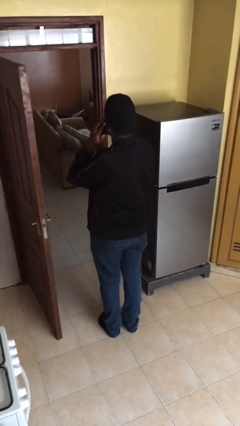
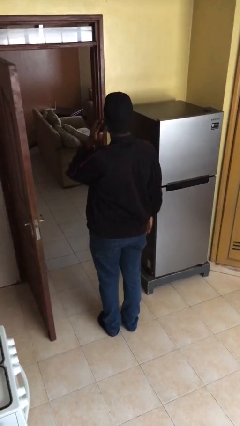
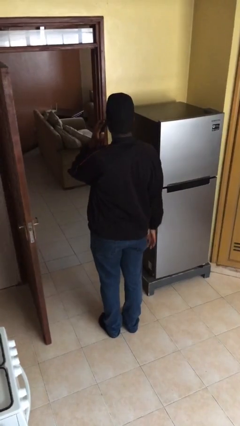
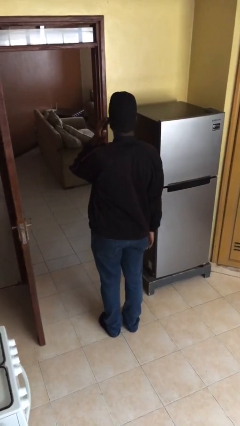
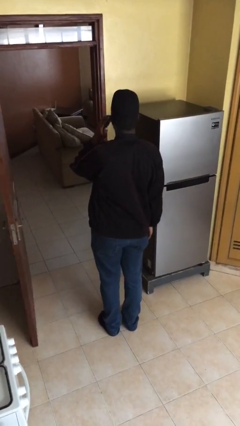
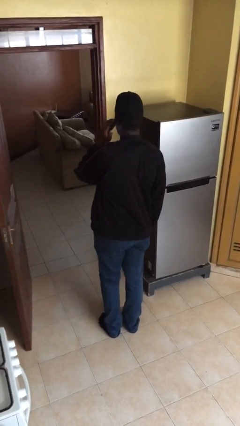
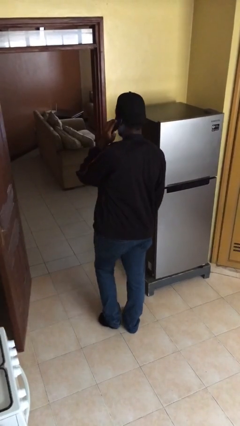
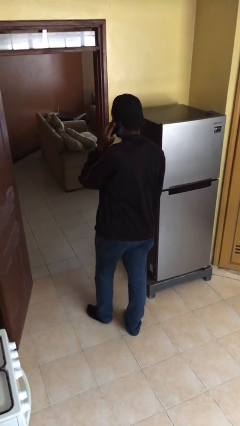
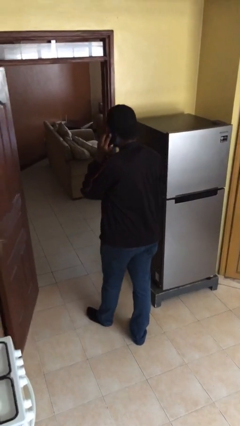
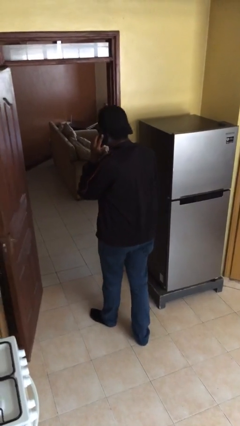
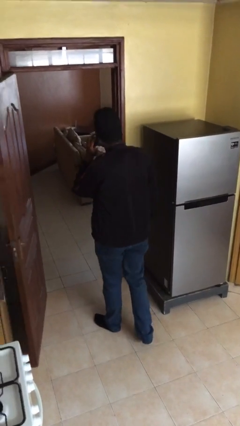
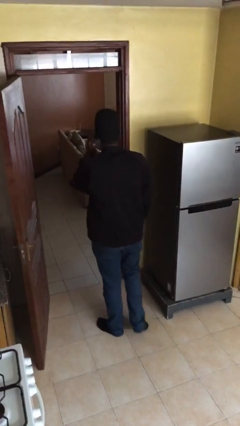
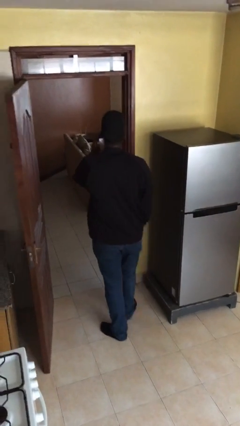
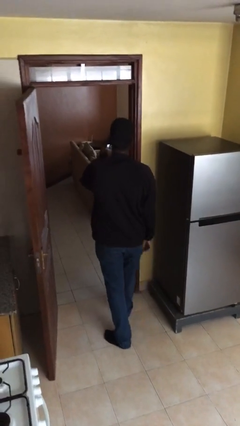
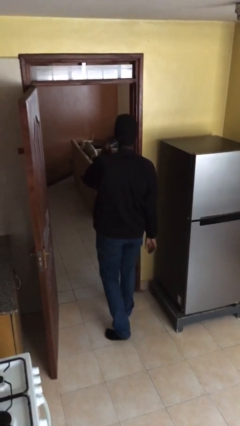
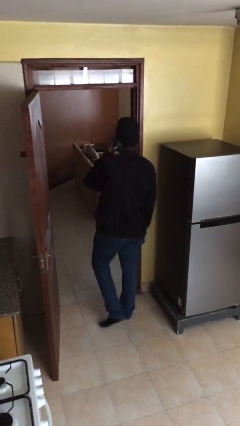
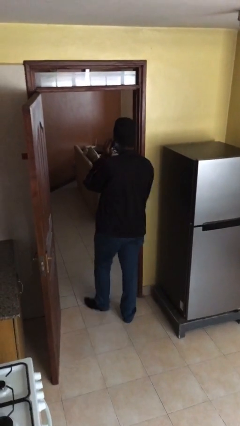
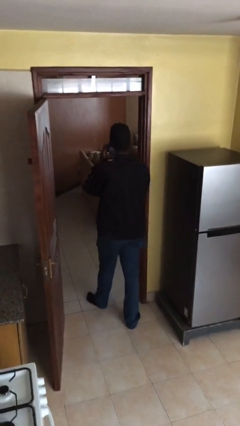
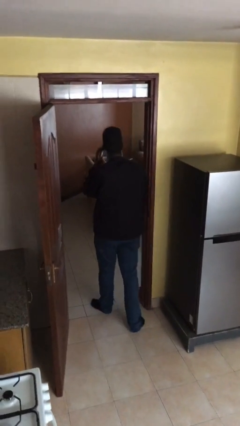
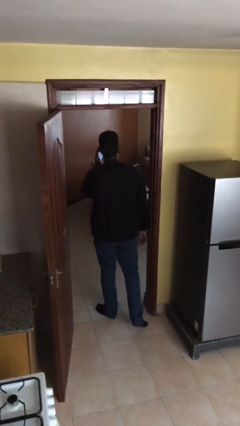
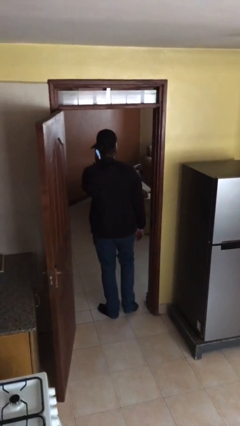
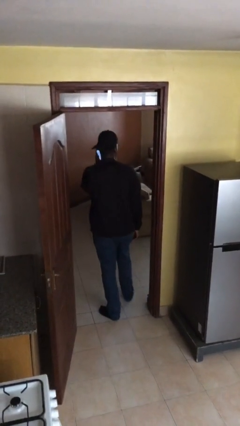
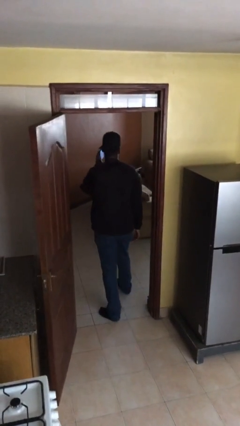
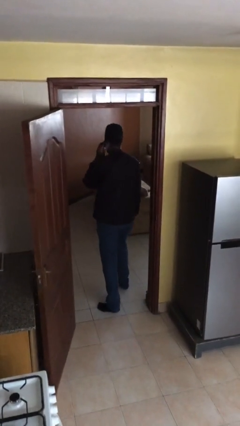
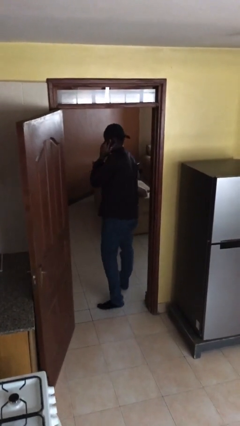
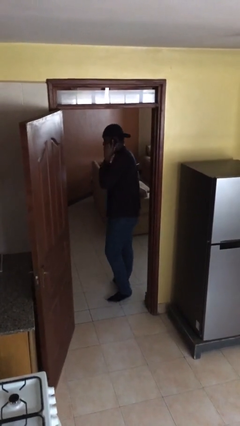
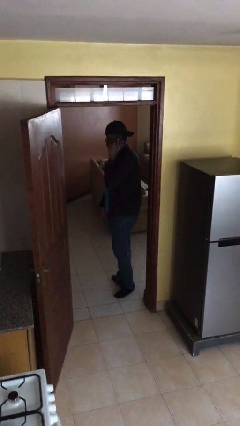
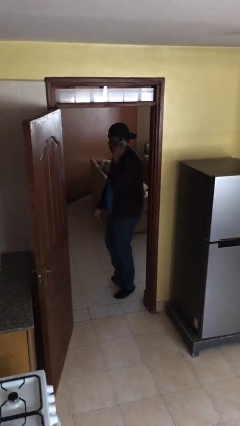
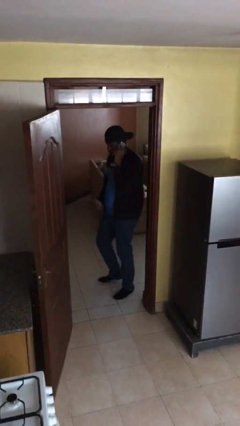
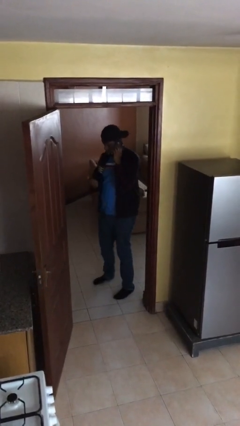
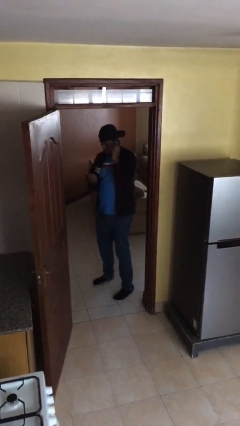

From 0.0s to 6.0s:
person exits scene through structure

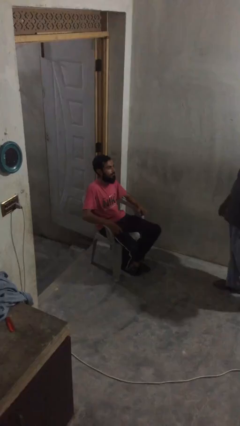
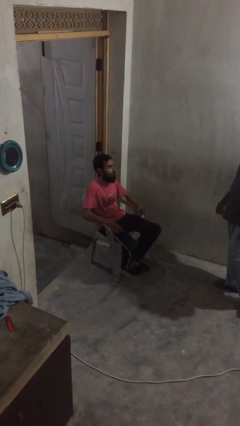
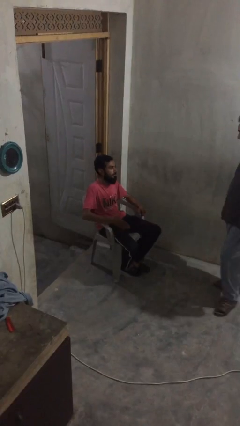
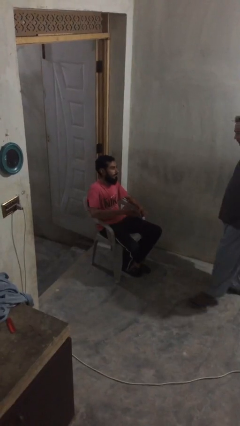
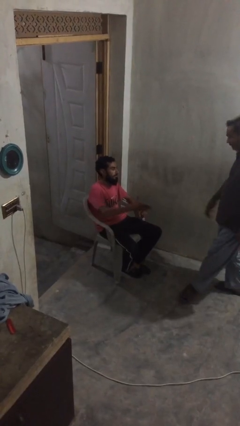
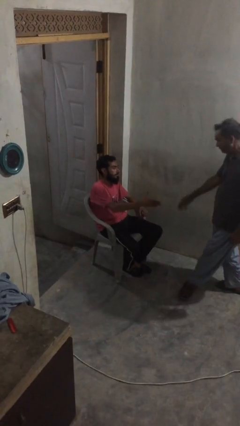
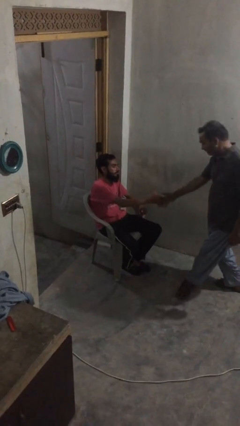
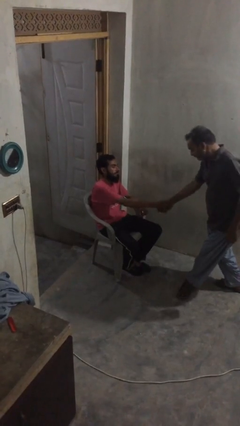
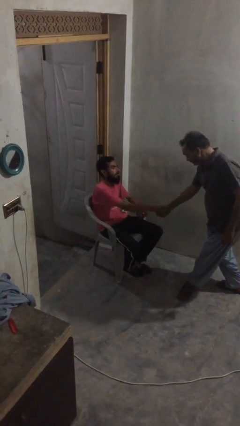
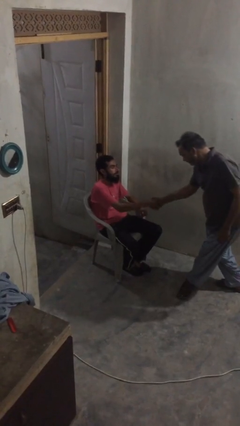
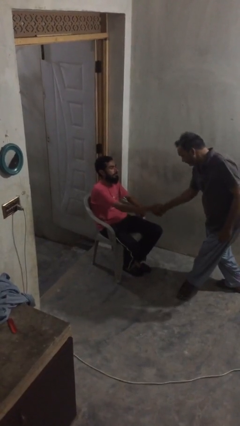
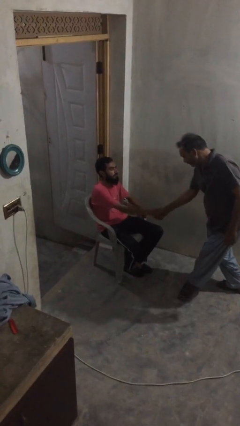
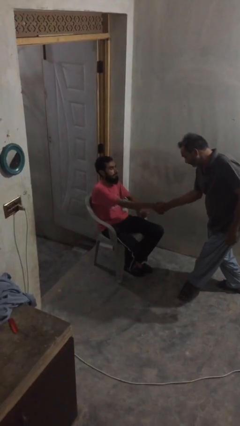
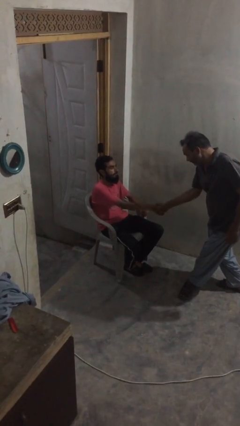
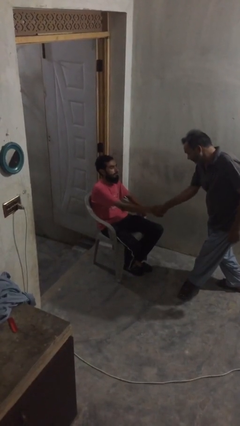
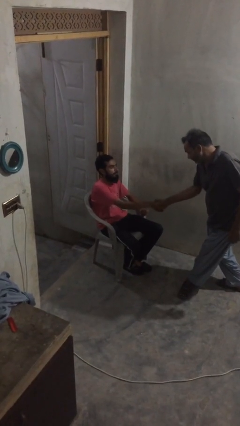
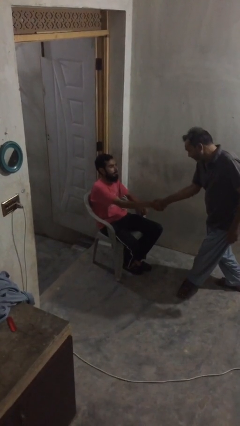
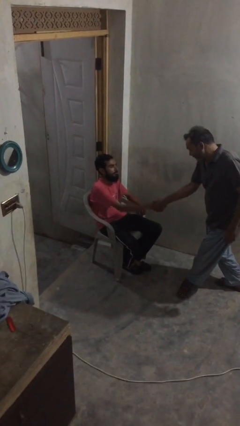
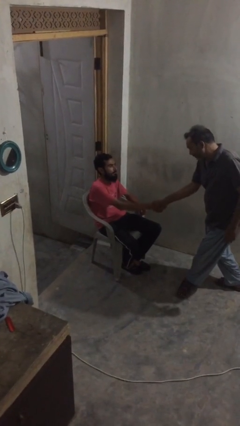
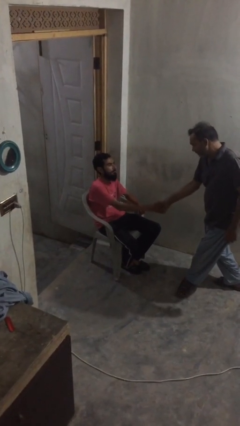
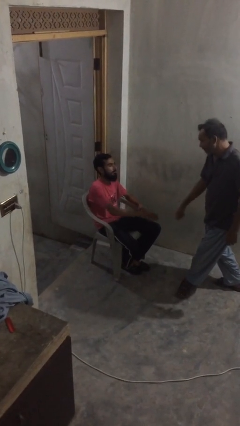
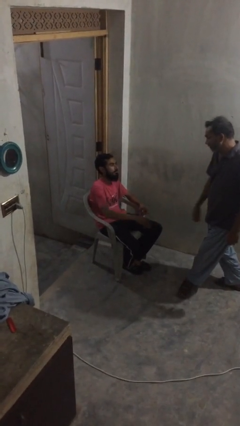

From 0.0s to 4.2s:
person shakes hand

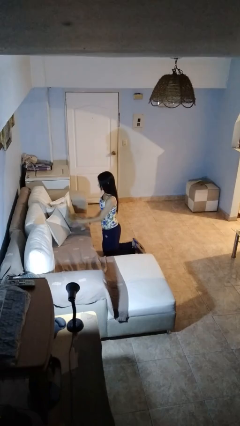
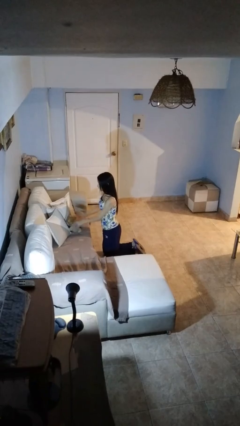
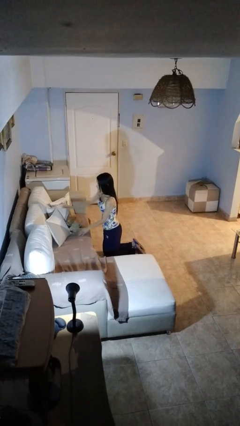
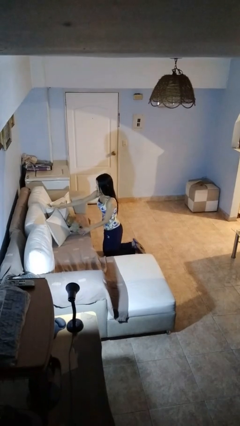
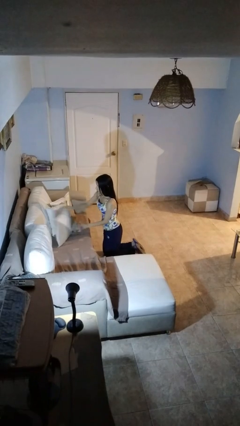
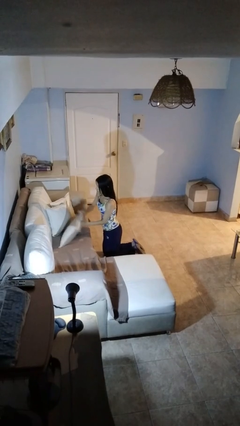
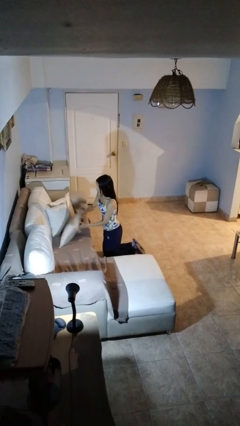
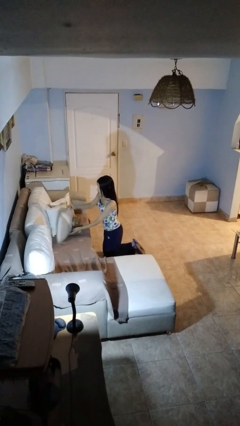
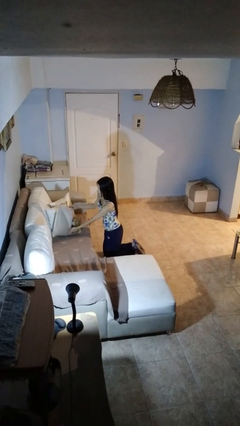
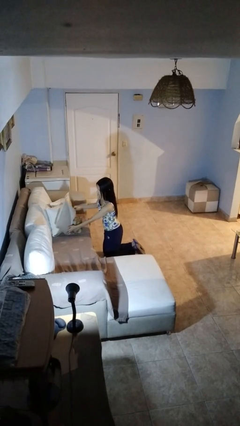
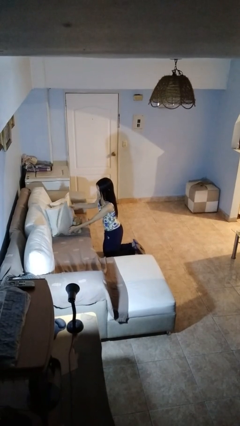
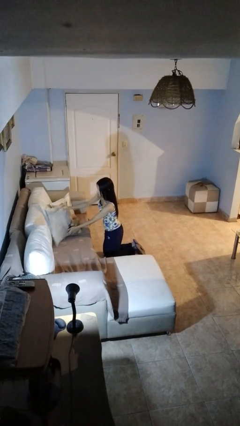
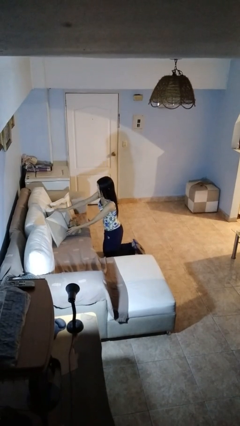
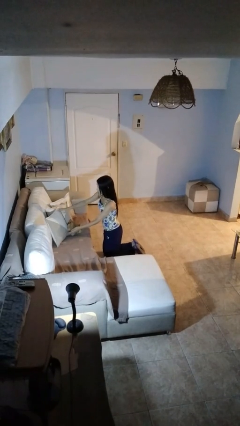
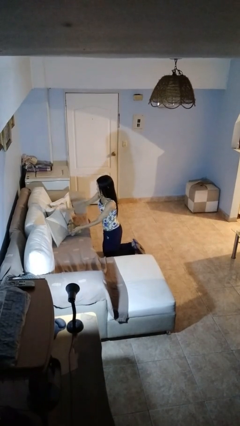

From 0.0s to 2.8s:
person searches in couch

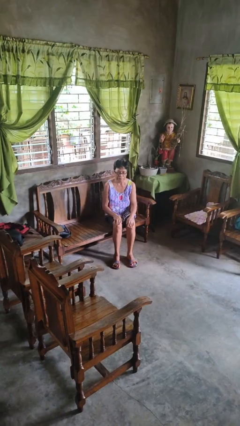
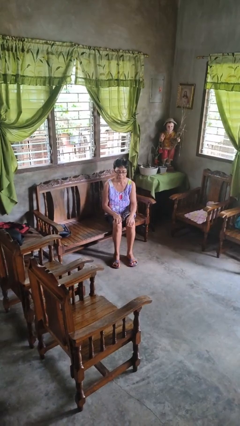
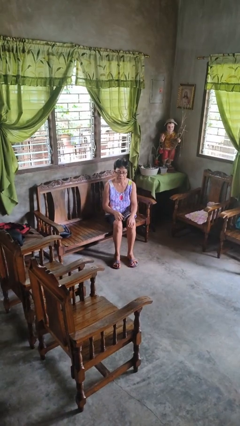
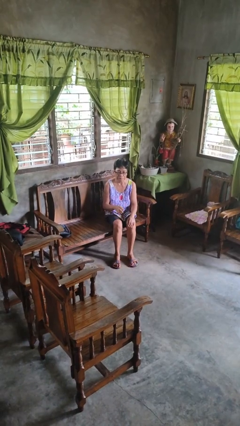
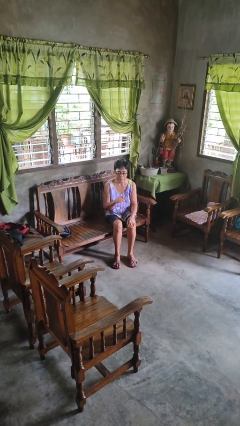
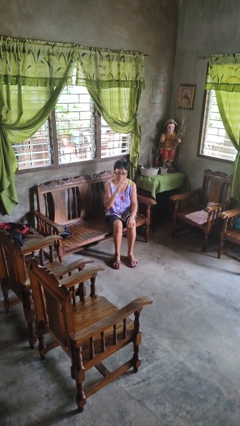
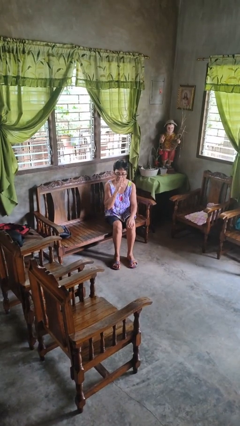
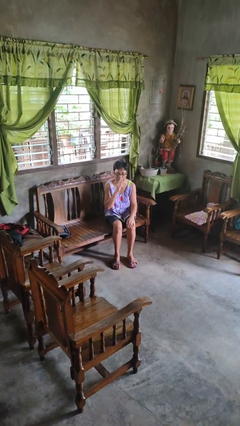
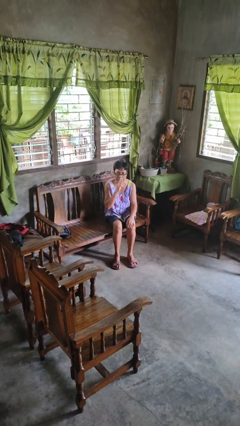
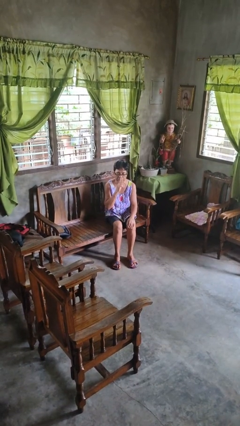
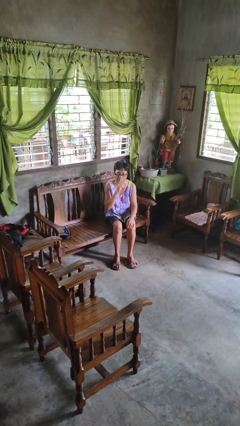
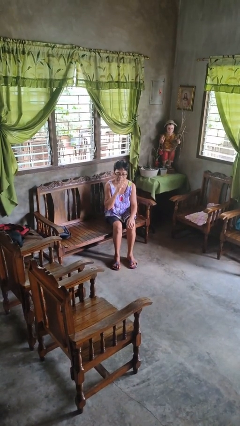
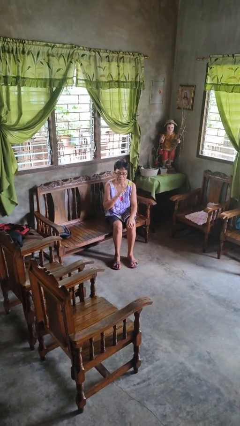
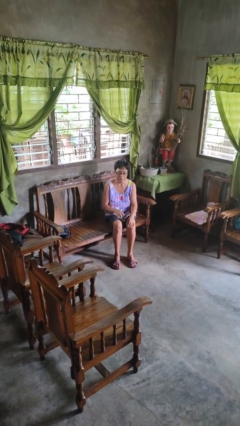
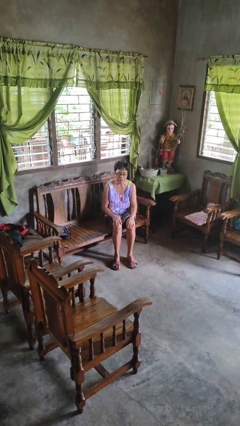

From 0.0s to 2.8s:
person gestures be quiet

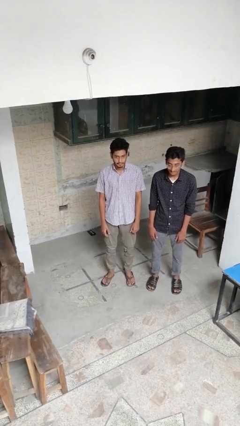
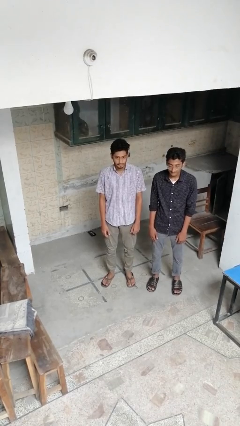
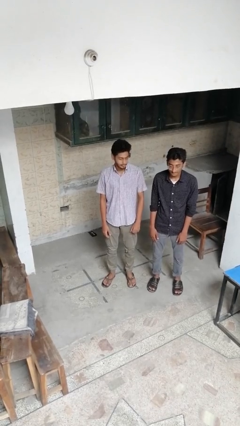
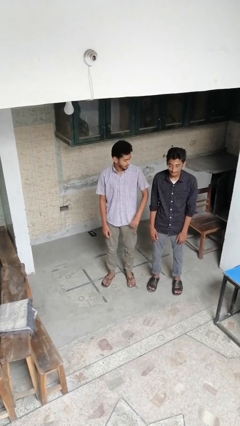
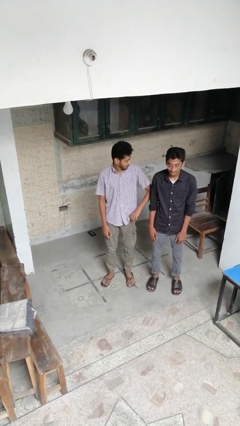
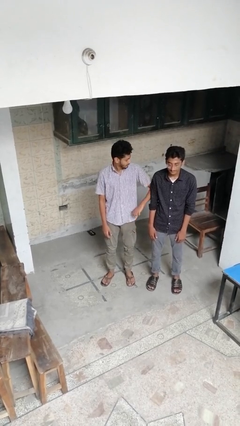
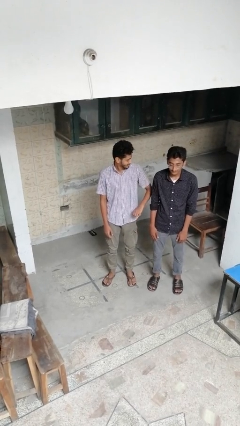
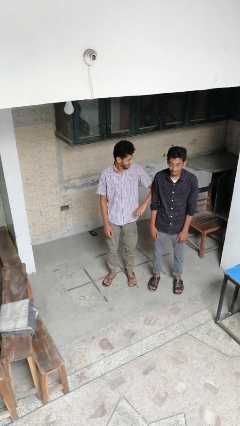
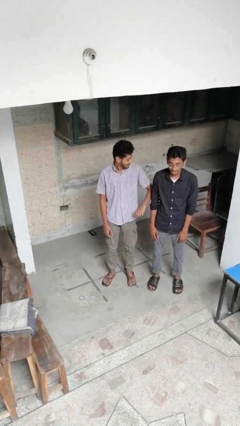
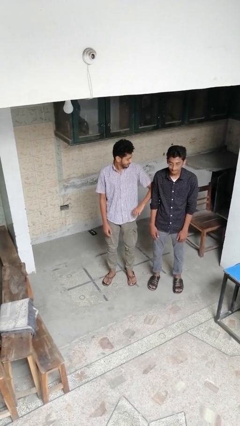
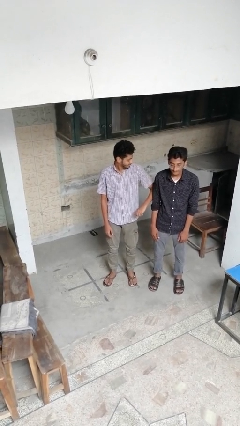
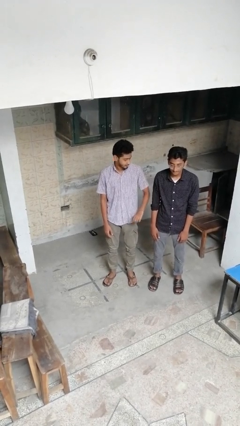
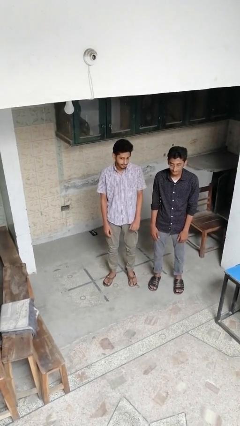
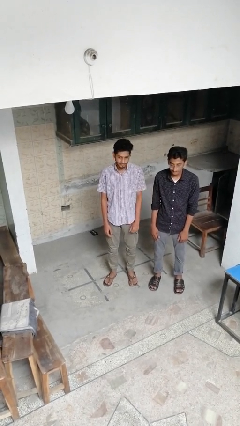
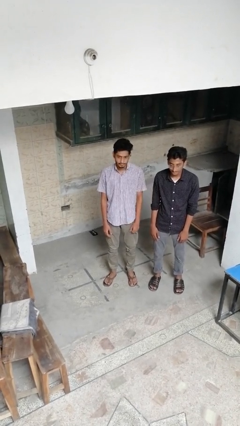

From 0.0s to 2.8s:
person nudges person with elbow
